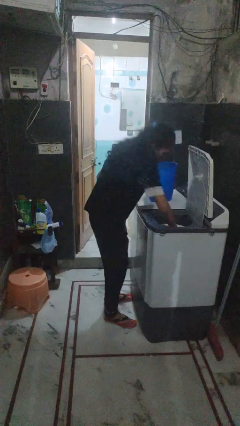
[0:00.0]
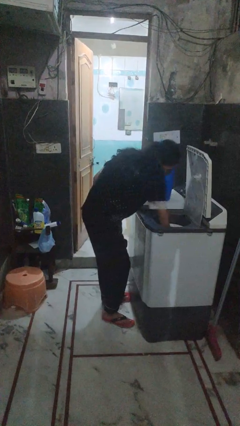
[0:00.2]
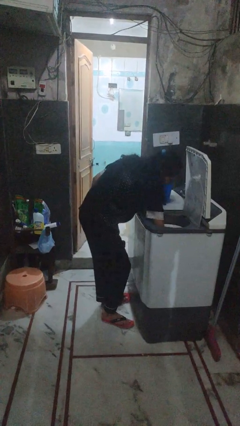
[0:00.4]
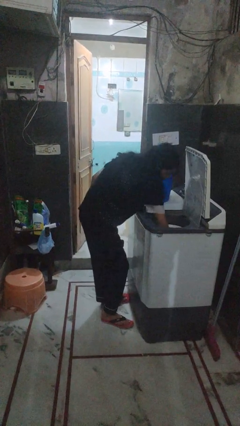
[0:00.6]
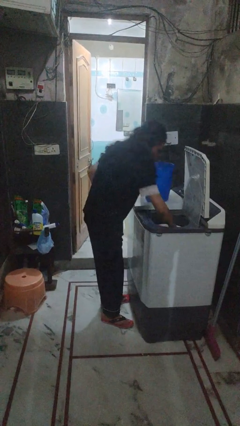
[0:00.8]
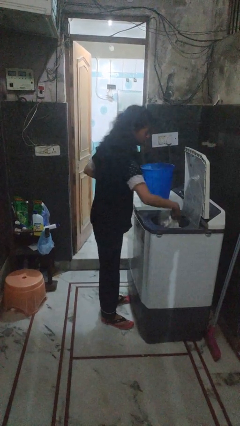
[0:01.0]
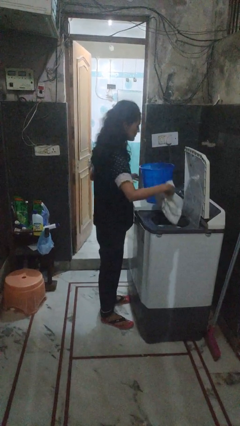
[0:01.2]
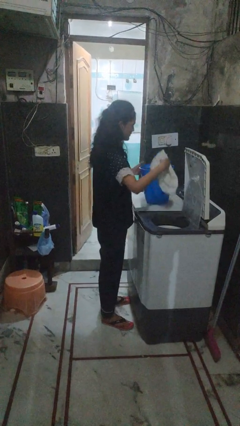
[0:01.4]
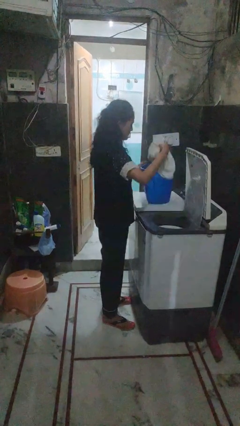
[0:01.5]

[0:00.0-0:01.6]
person unloads dryer

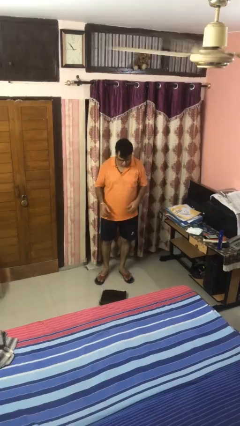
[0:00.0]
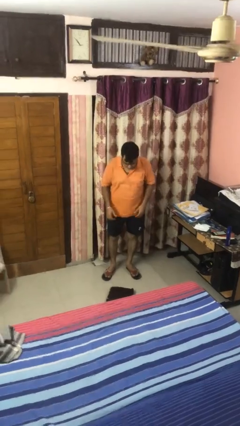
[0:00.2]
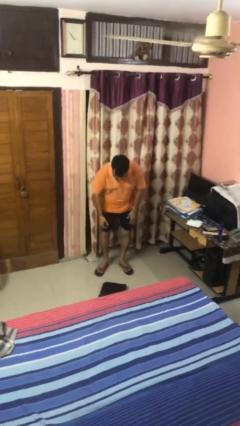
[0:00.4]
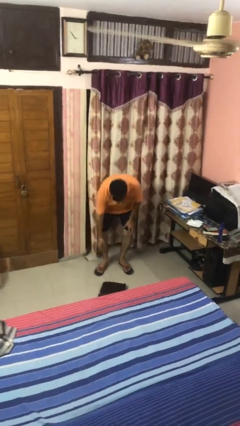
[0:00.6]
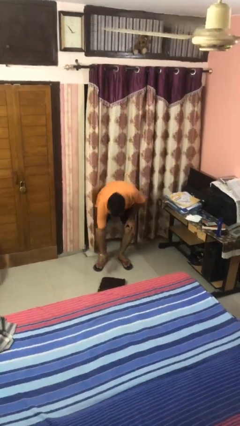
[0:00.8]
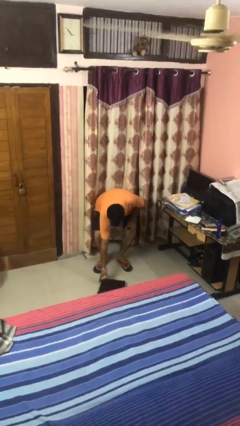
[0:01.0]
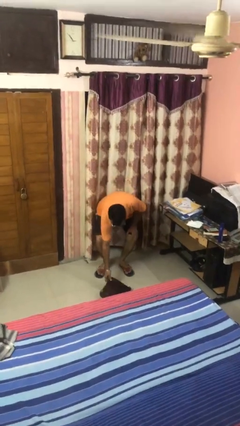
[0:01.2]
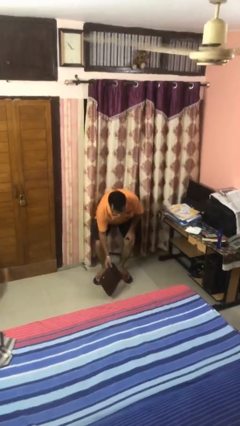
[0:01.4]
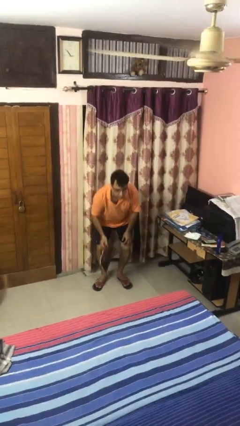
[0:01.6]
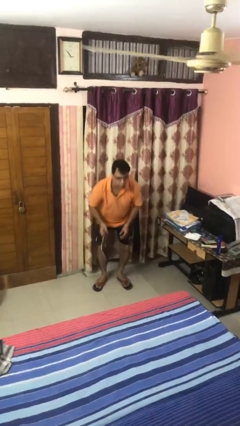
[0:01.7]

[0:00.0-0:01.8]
person picks up object from floor

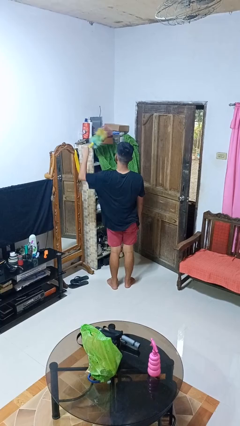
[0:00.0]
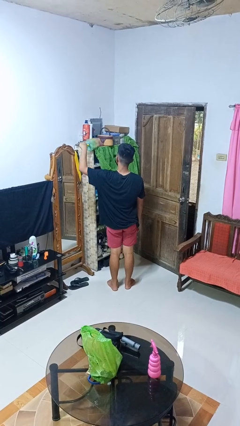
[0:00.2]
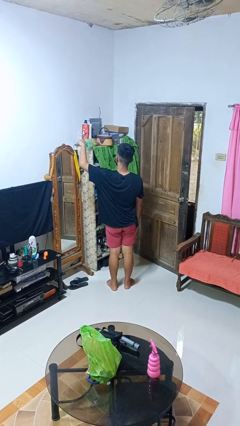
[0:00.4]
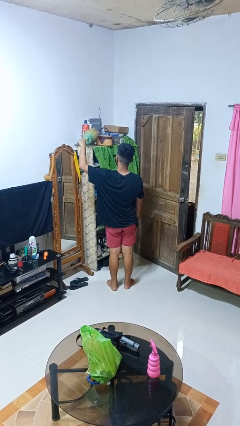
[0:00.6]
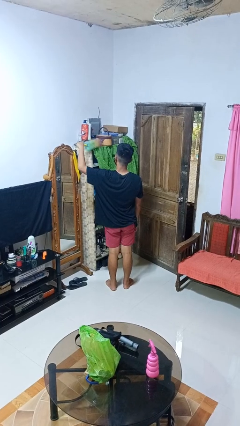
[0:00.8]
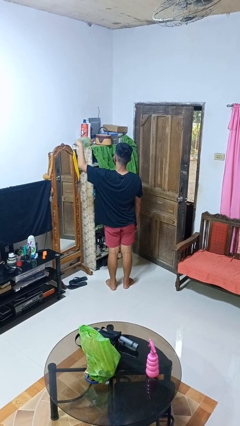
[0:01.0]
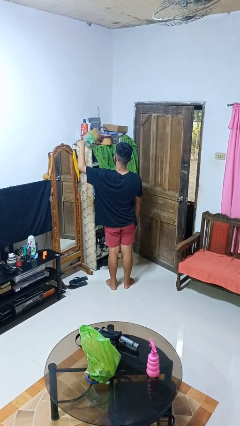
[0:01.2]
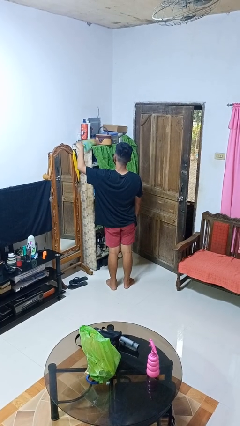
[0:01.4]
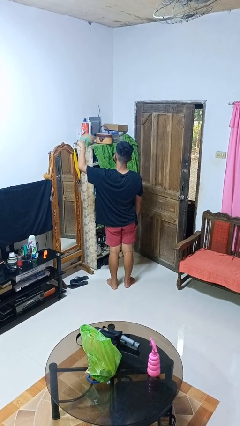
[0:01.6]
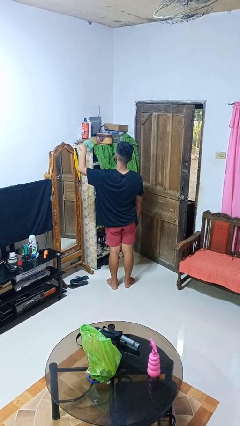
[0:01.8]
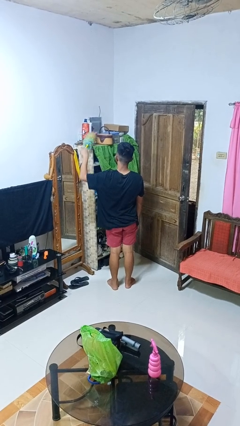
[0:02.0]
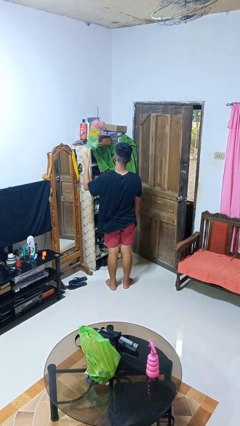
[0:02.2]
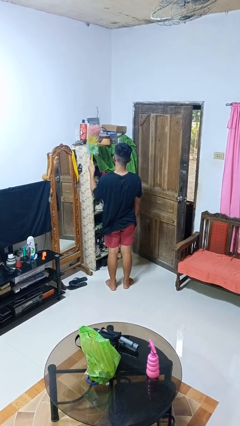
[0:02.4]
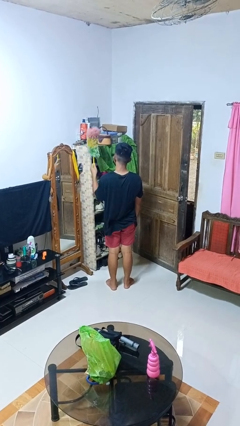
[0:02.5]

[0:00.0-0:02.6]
person dusts furniture

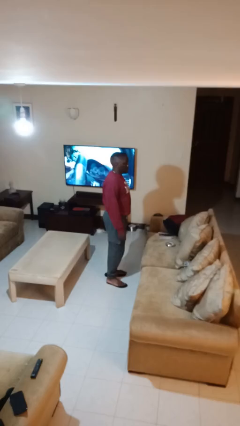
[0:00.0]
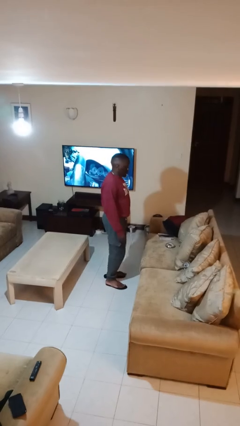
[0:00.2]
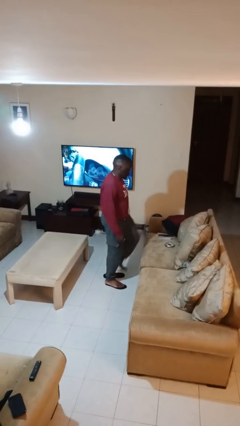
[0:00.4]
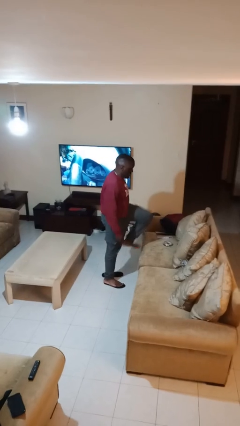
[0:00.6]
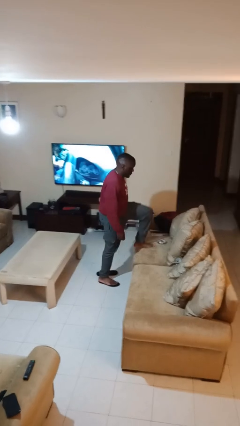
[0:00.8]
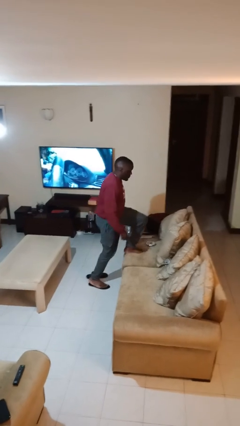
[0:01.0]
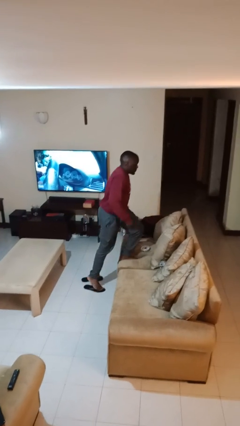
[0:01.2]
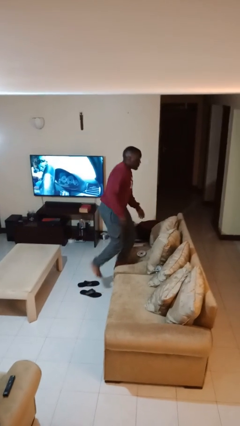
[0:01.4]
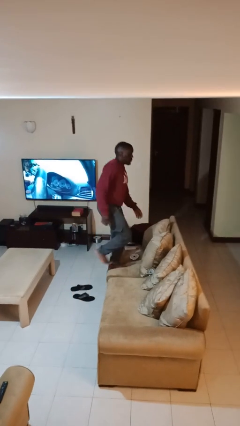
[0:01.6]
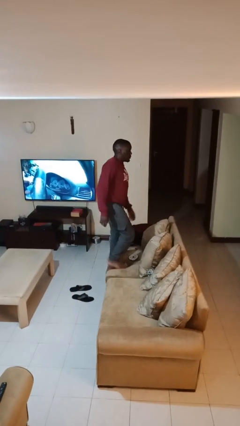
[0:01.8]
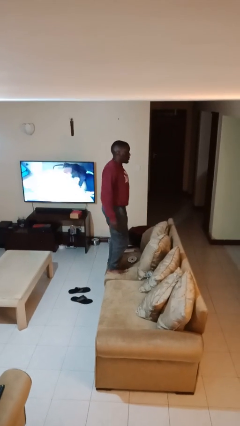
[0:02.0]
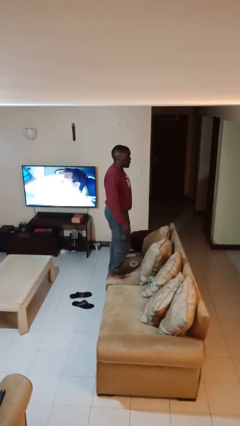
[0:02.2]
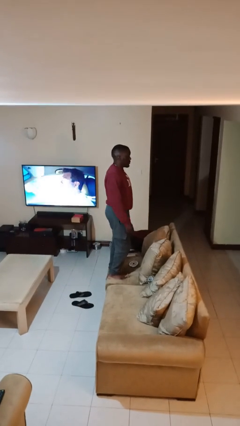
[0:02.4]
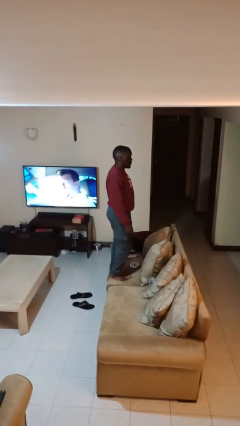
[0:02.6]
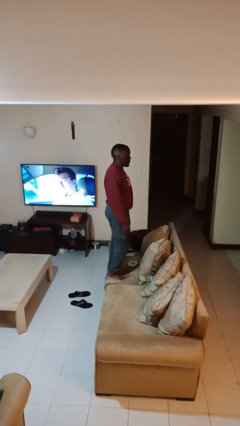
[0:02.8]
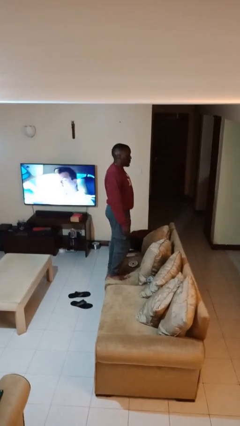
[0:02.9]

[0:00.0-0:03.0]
person climbs on couch

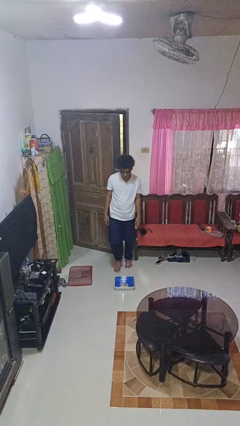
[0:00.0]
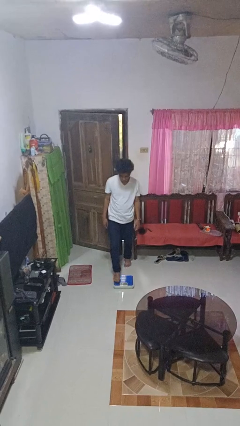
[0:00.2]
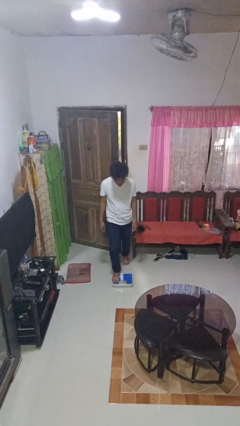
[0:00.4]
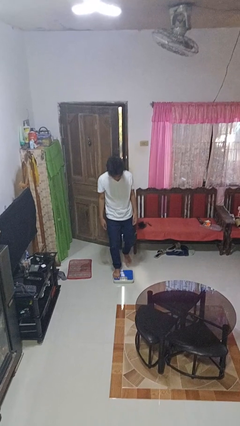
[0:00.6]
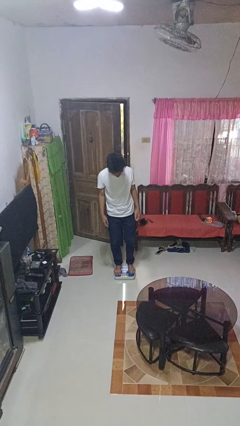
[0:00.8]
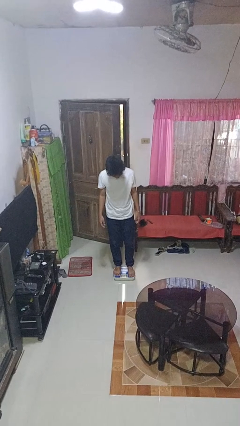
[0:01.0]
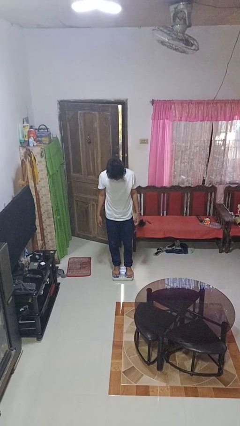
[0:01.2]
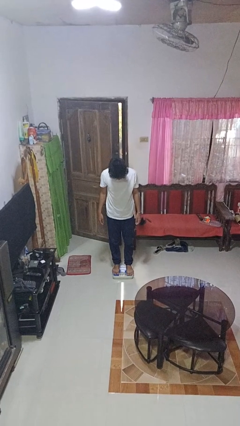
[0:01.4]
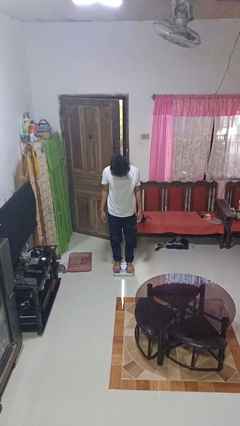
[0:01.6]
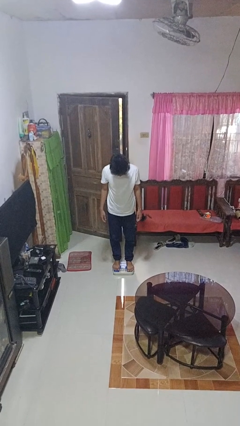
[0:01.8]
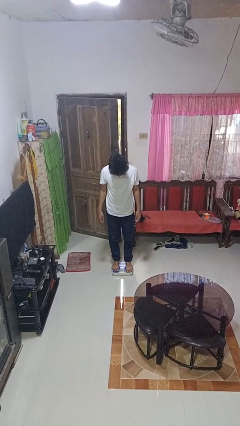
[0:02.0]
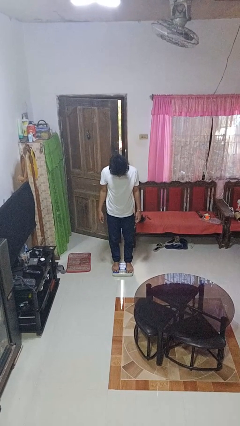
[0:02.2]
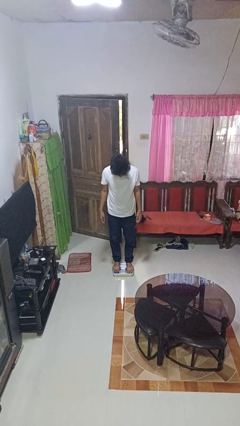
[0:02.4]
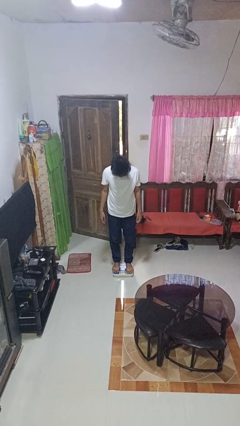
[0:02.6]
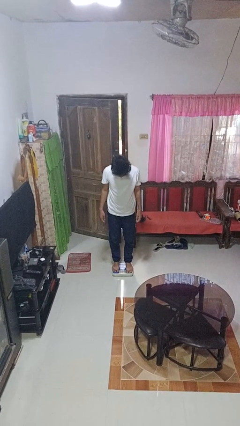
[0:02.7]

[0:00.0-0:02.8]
person uses bodyweight scale

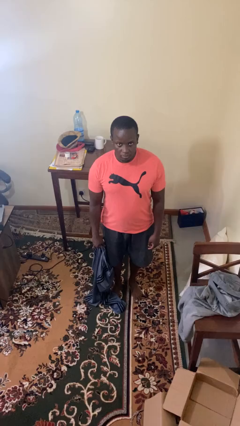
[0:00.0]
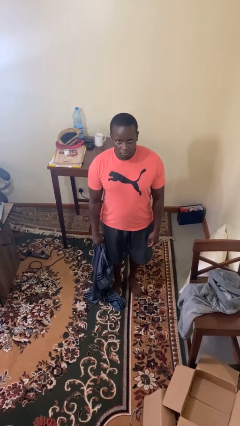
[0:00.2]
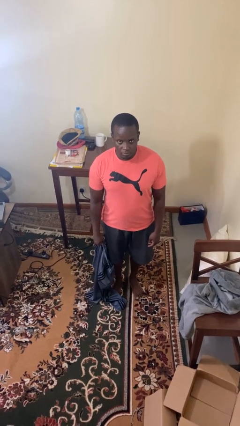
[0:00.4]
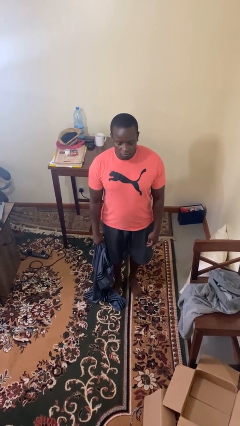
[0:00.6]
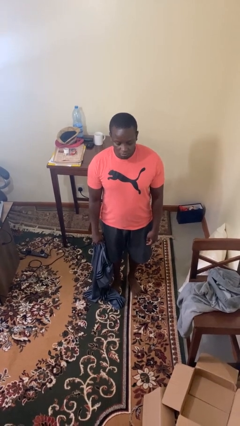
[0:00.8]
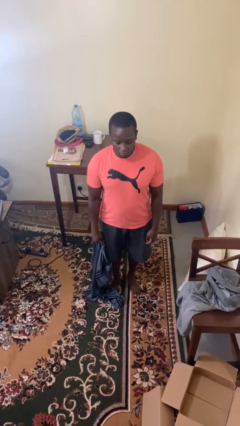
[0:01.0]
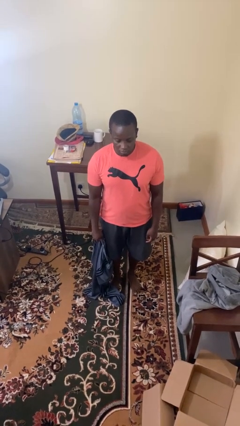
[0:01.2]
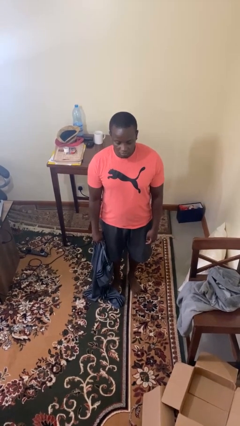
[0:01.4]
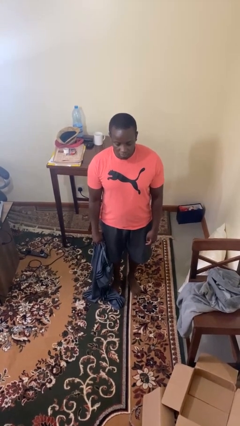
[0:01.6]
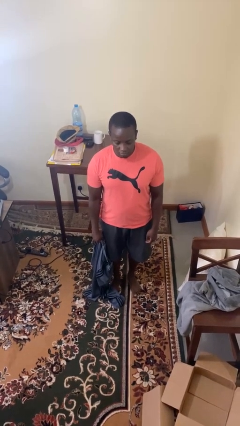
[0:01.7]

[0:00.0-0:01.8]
person puts on pants

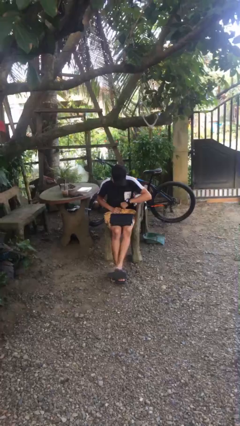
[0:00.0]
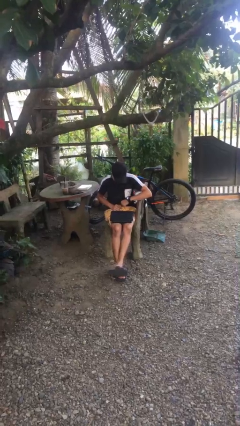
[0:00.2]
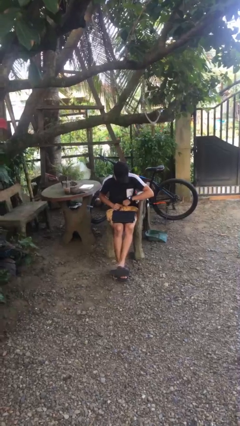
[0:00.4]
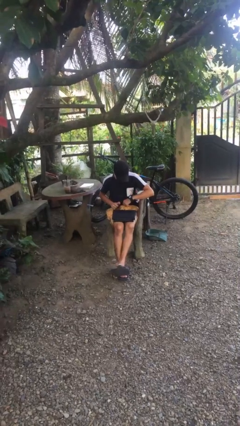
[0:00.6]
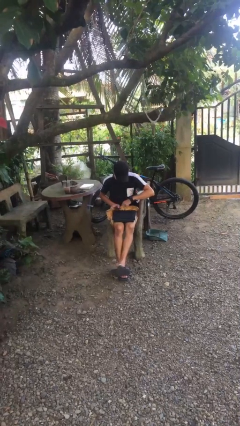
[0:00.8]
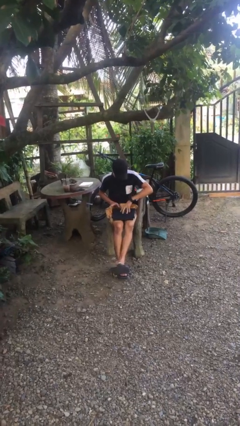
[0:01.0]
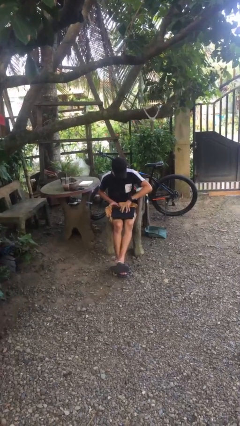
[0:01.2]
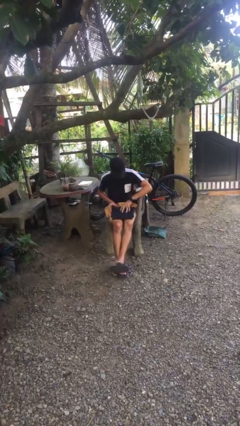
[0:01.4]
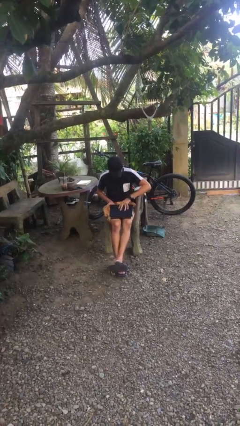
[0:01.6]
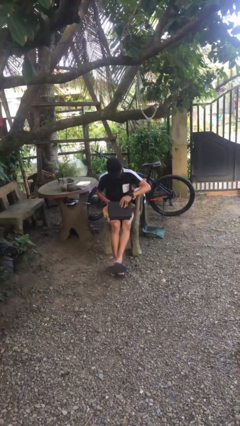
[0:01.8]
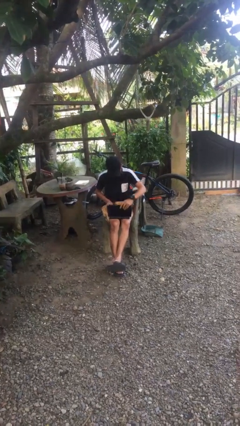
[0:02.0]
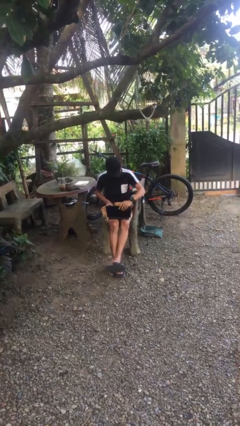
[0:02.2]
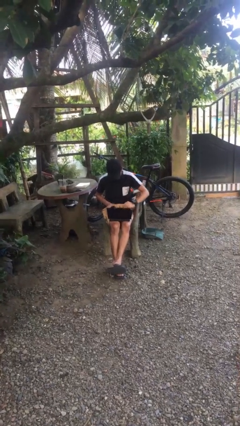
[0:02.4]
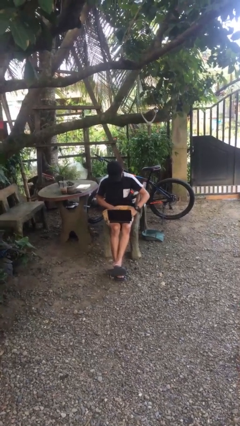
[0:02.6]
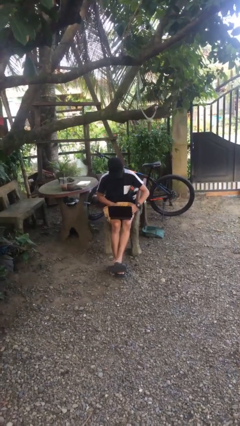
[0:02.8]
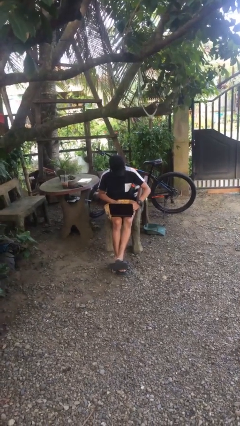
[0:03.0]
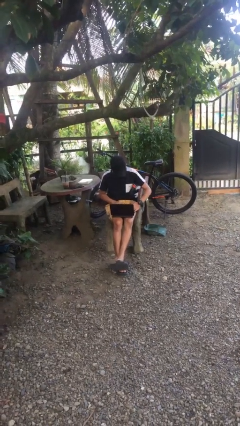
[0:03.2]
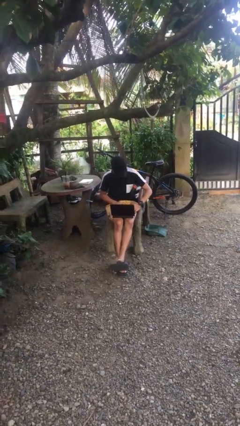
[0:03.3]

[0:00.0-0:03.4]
person interacts with laptop
